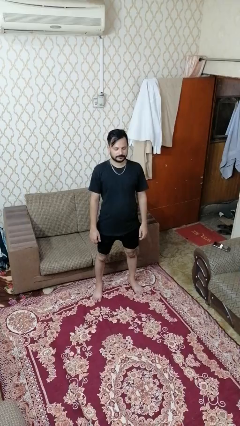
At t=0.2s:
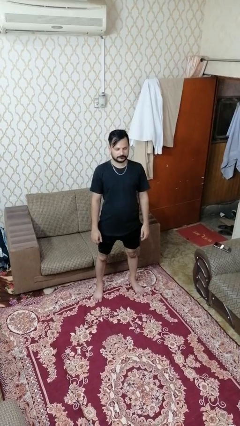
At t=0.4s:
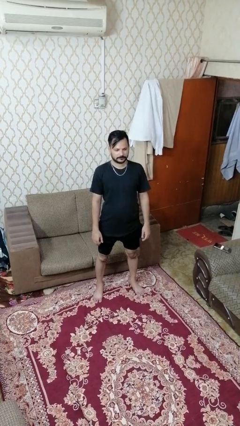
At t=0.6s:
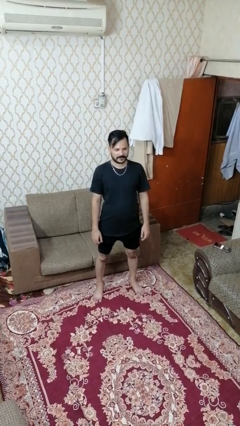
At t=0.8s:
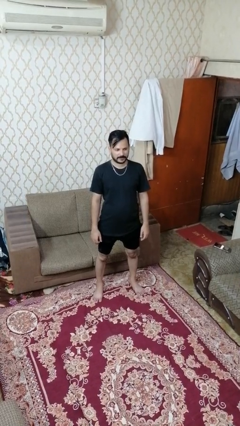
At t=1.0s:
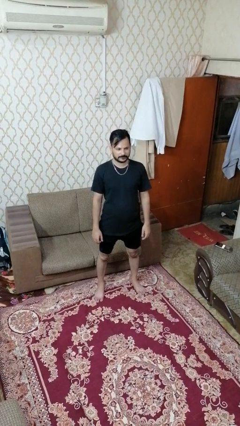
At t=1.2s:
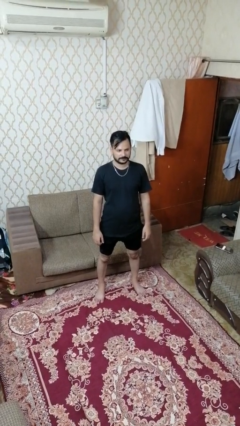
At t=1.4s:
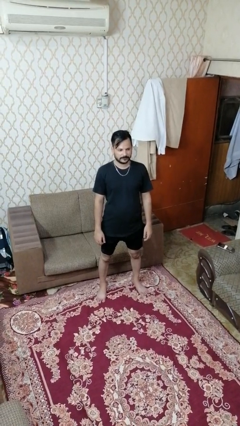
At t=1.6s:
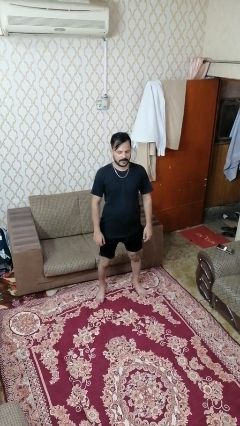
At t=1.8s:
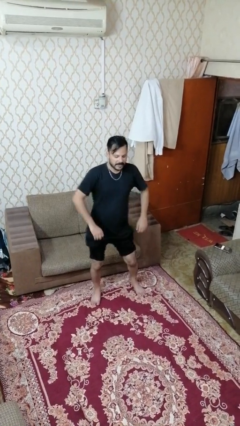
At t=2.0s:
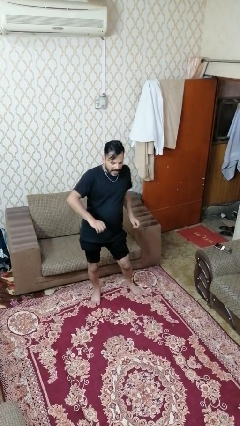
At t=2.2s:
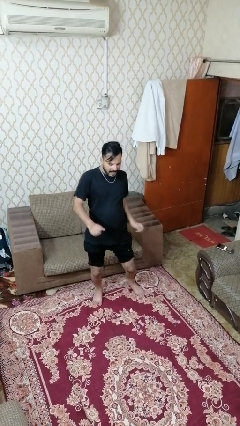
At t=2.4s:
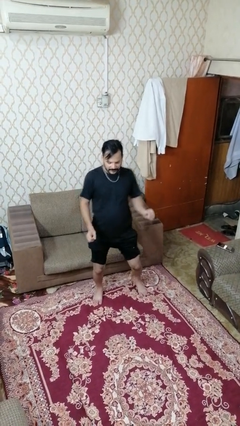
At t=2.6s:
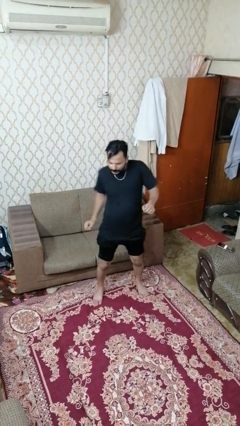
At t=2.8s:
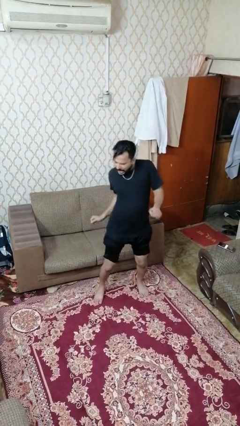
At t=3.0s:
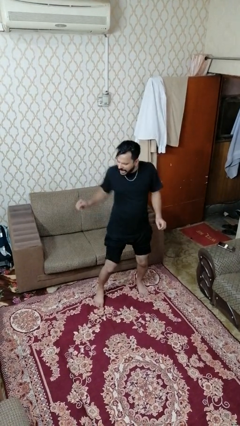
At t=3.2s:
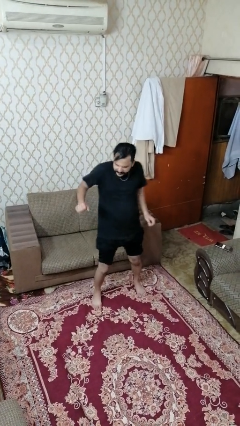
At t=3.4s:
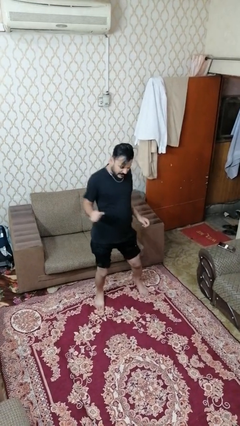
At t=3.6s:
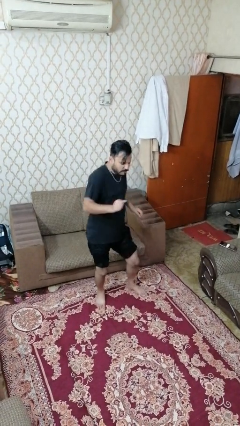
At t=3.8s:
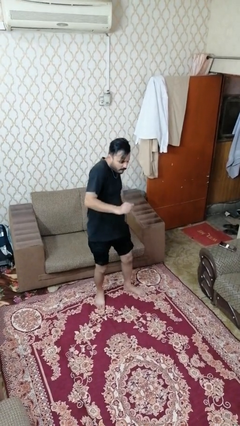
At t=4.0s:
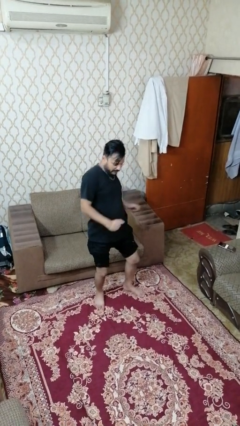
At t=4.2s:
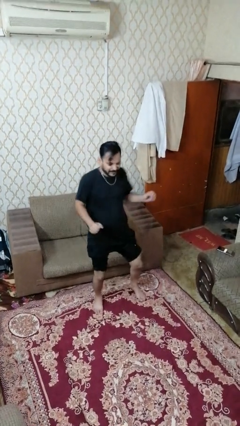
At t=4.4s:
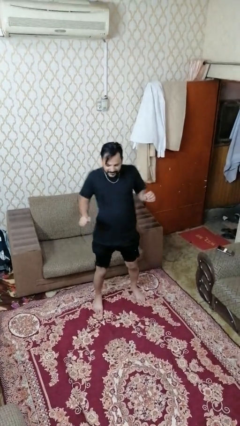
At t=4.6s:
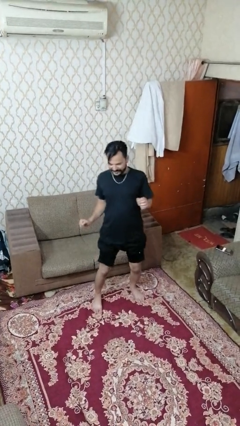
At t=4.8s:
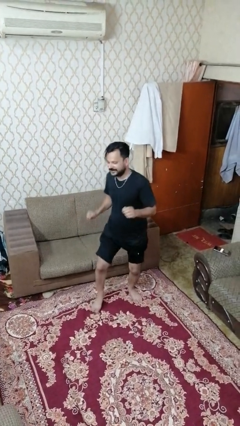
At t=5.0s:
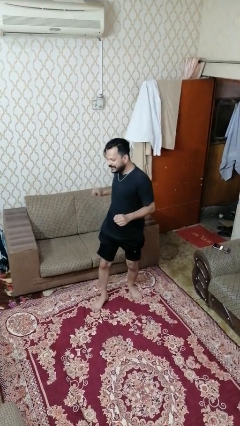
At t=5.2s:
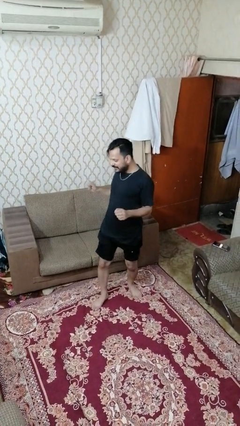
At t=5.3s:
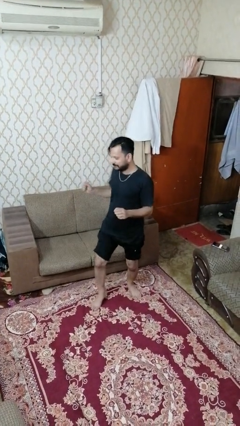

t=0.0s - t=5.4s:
person dances in place

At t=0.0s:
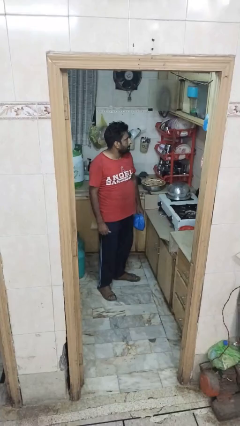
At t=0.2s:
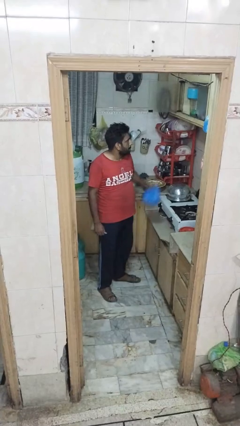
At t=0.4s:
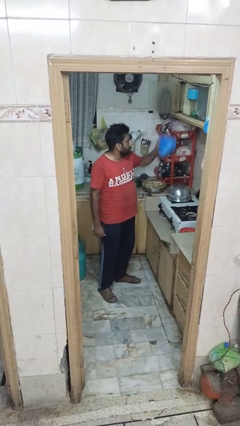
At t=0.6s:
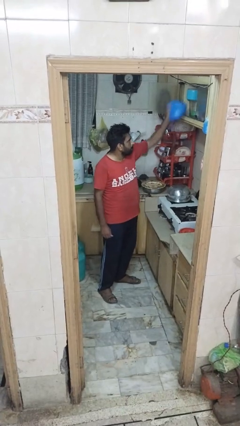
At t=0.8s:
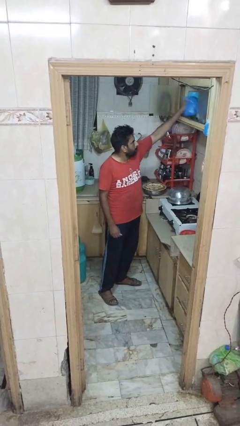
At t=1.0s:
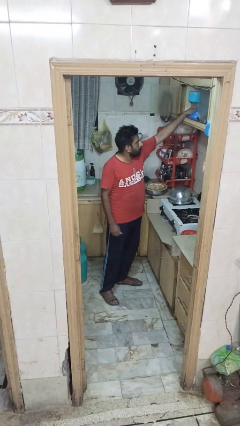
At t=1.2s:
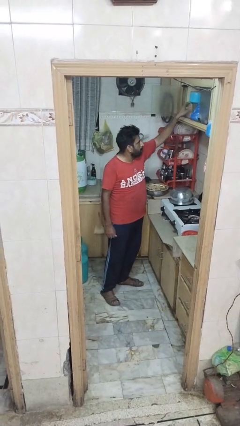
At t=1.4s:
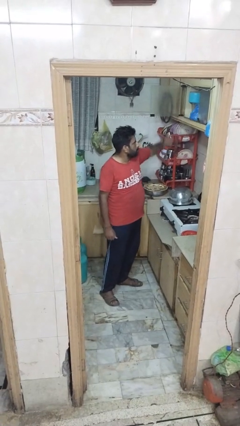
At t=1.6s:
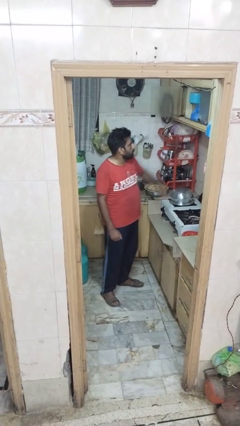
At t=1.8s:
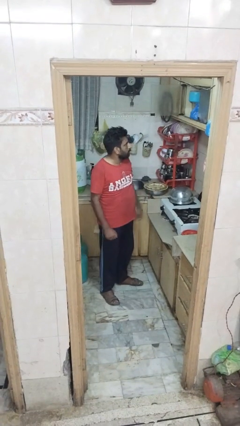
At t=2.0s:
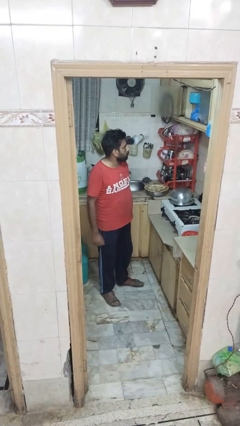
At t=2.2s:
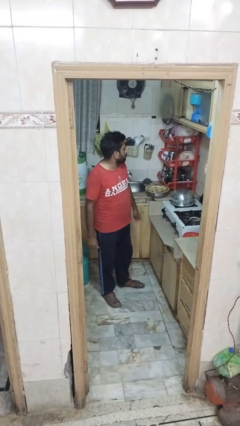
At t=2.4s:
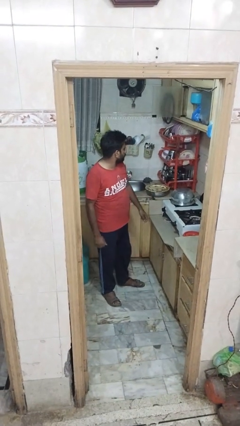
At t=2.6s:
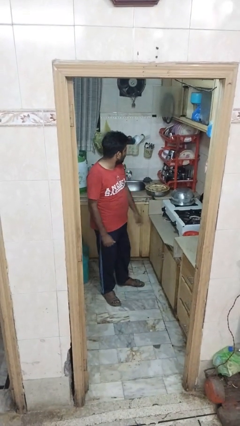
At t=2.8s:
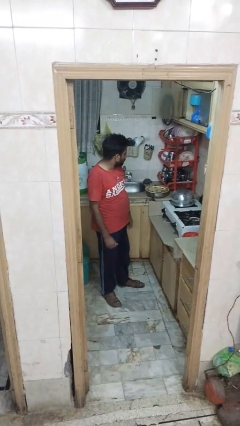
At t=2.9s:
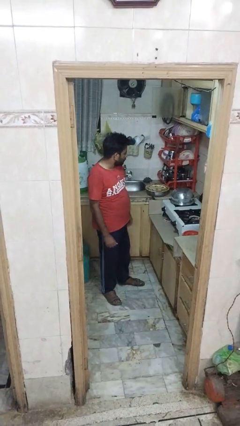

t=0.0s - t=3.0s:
person loads groceries into cabinet

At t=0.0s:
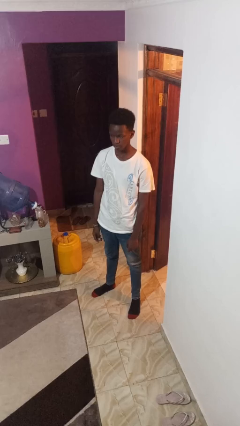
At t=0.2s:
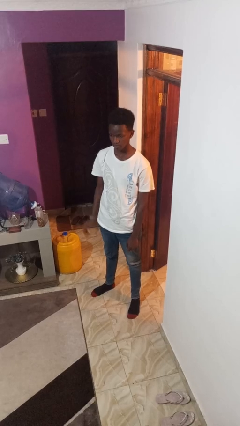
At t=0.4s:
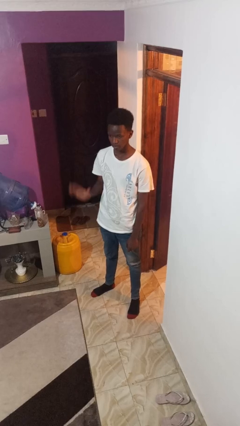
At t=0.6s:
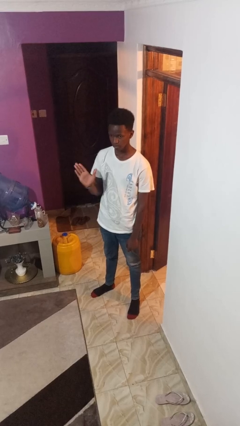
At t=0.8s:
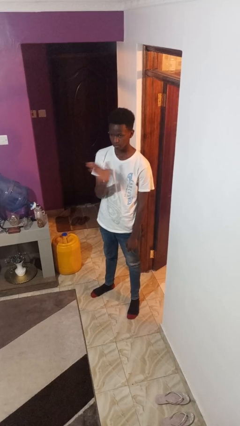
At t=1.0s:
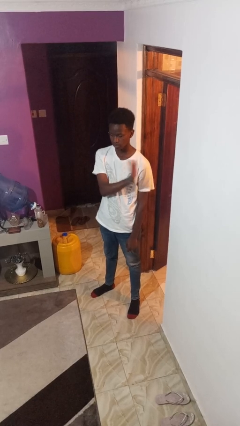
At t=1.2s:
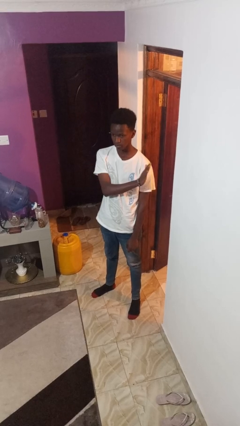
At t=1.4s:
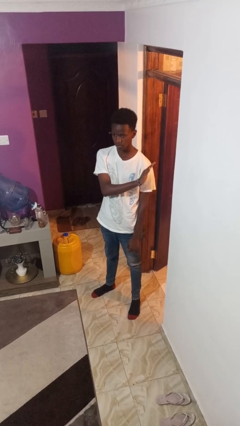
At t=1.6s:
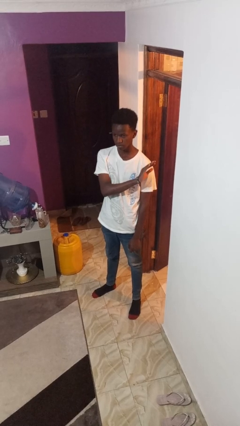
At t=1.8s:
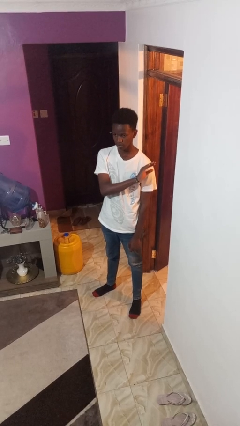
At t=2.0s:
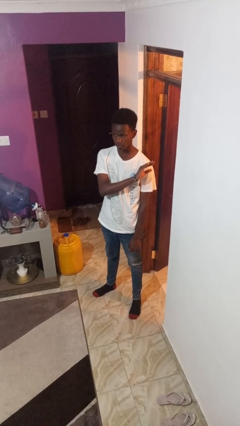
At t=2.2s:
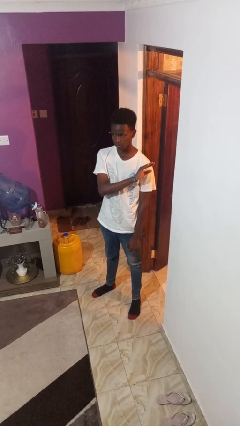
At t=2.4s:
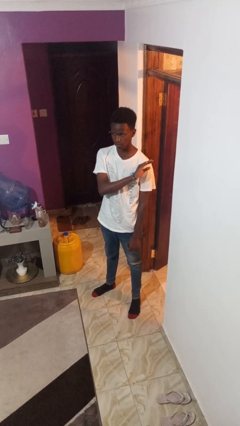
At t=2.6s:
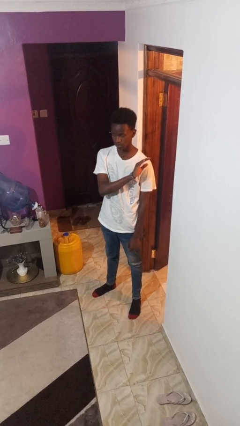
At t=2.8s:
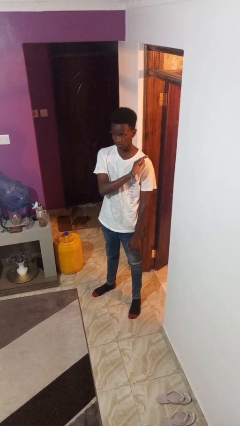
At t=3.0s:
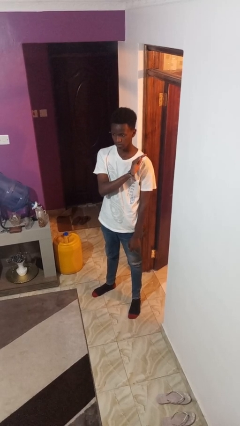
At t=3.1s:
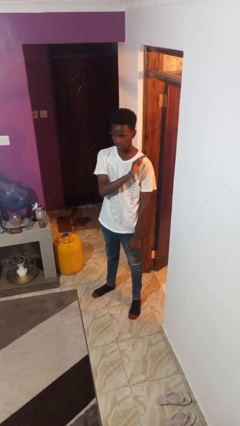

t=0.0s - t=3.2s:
person gestures swipe left

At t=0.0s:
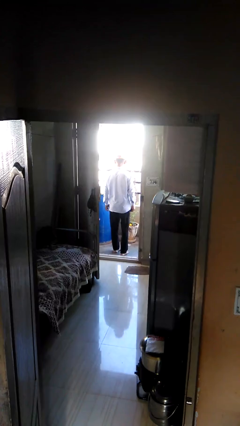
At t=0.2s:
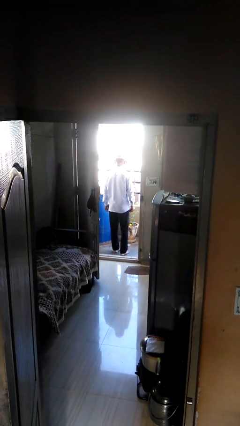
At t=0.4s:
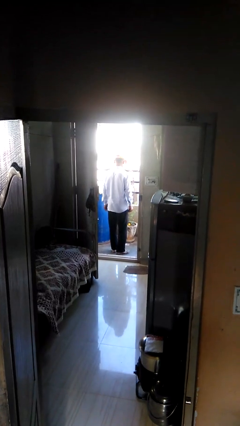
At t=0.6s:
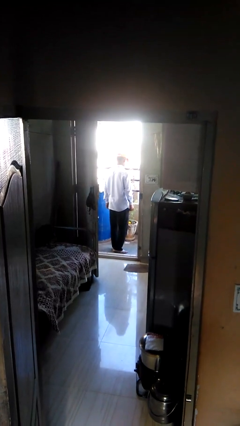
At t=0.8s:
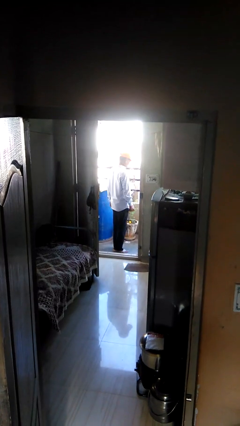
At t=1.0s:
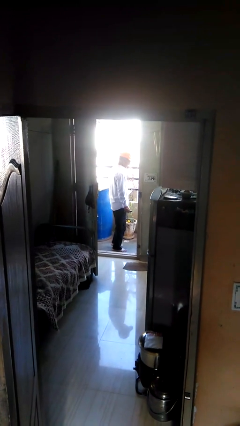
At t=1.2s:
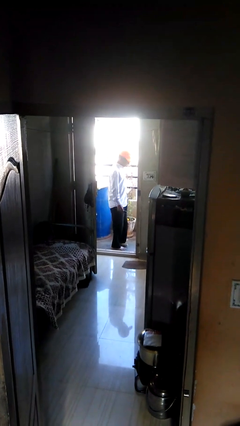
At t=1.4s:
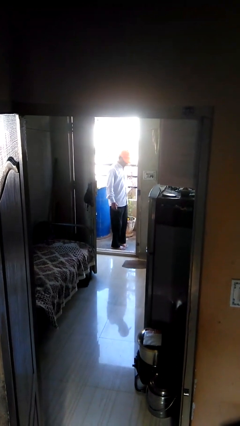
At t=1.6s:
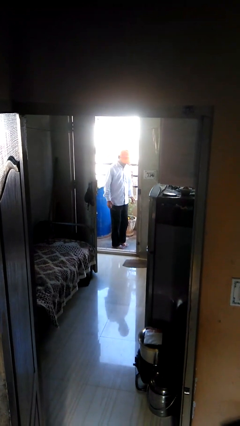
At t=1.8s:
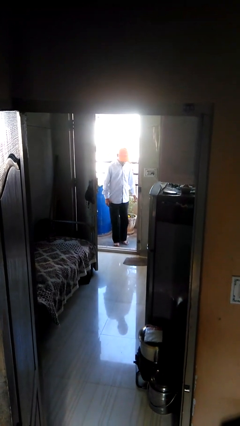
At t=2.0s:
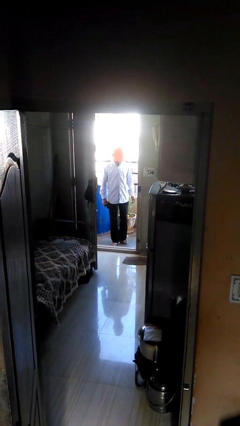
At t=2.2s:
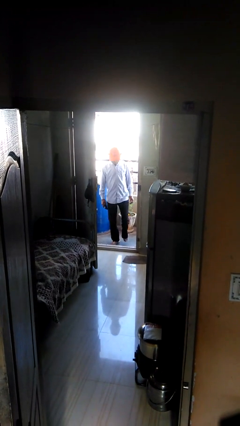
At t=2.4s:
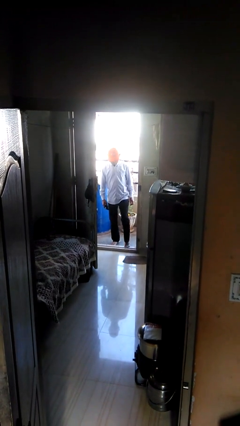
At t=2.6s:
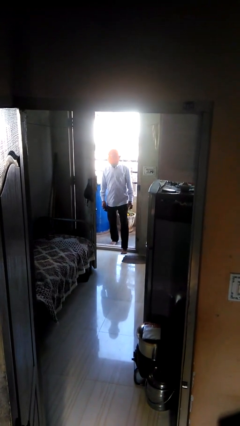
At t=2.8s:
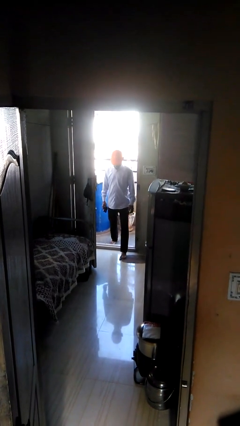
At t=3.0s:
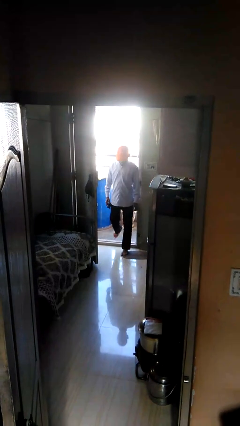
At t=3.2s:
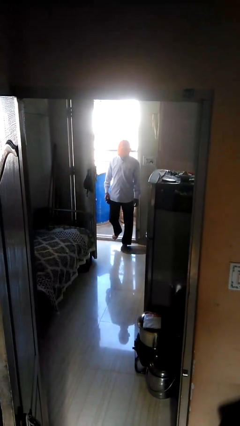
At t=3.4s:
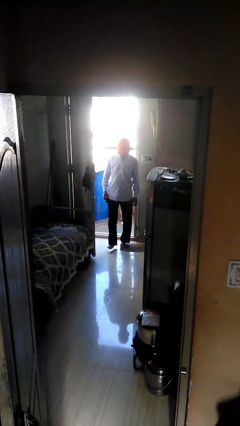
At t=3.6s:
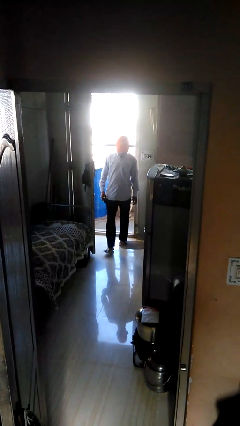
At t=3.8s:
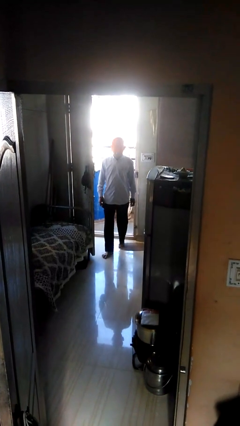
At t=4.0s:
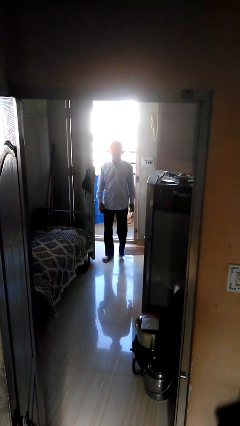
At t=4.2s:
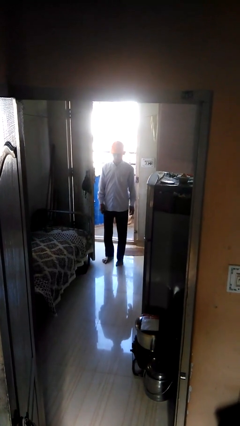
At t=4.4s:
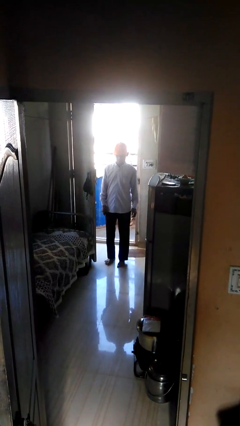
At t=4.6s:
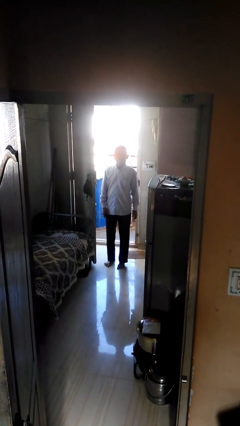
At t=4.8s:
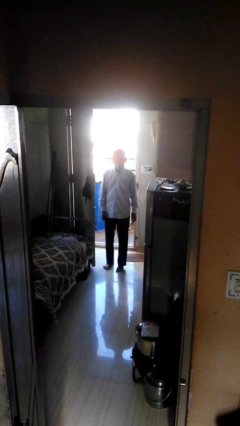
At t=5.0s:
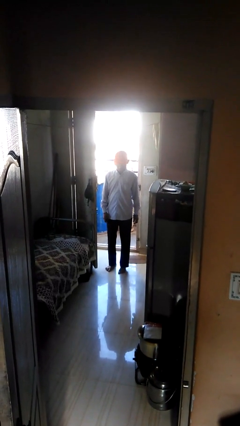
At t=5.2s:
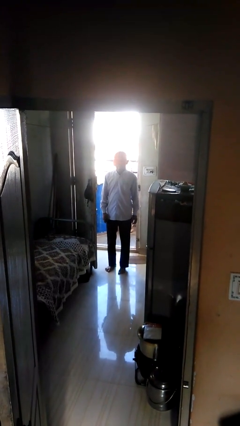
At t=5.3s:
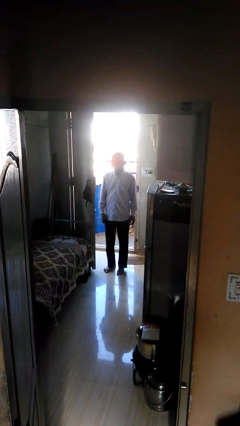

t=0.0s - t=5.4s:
person enters scene through structure

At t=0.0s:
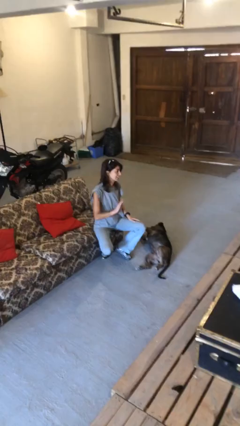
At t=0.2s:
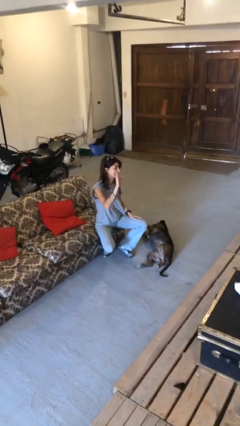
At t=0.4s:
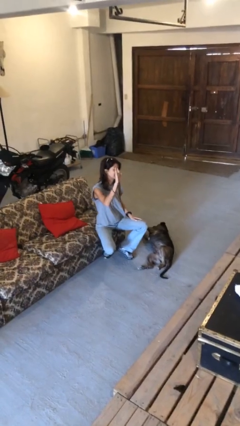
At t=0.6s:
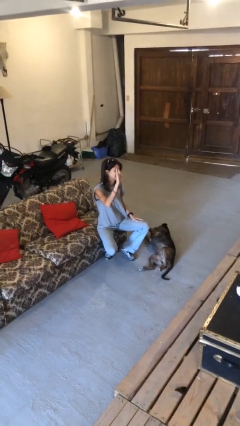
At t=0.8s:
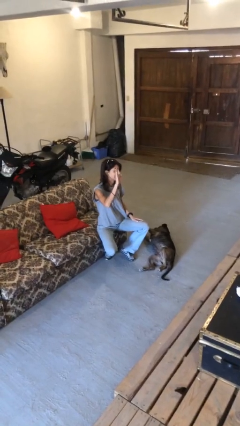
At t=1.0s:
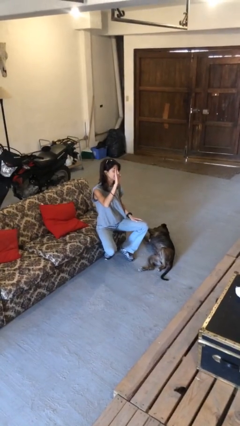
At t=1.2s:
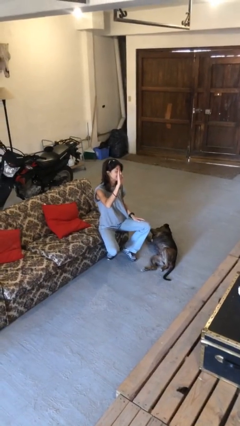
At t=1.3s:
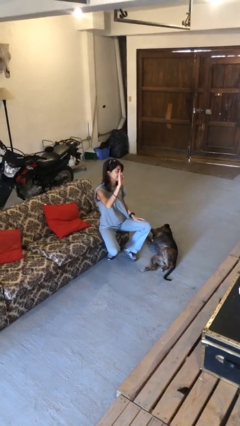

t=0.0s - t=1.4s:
person gestures raise hand
